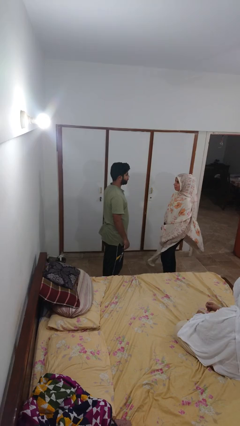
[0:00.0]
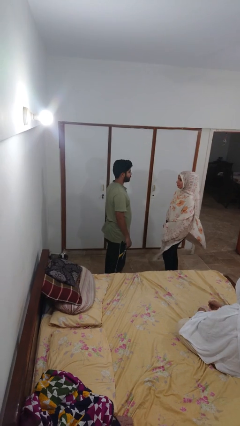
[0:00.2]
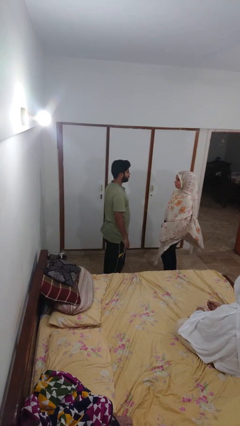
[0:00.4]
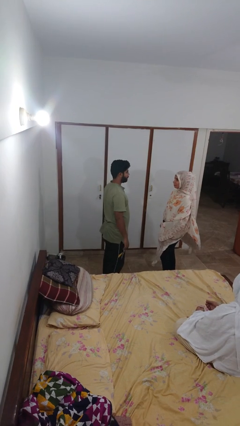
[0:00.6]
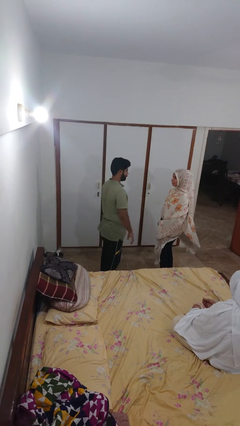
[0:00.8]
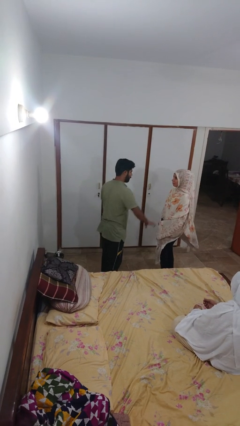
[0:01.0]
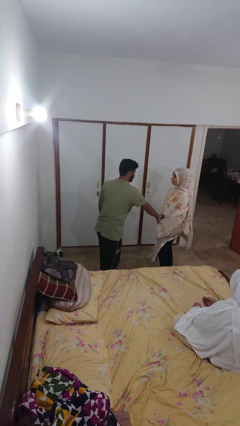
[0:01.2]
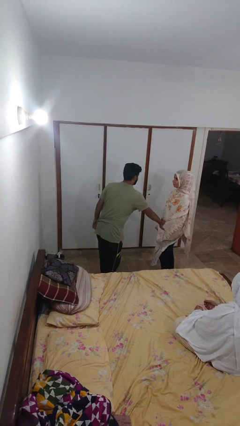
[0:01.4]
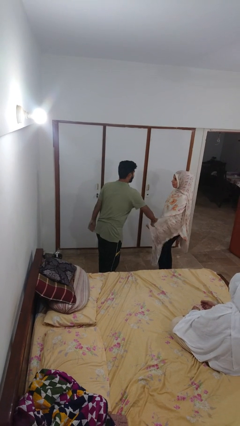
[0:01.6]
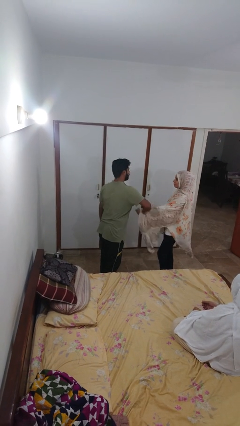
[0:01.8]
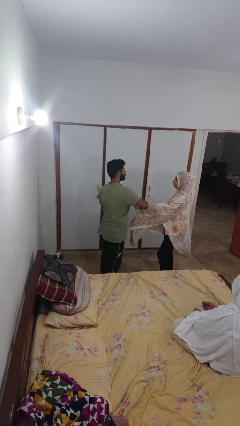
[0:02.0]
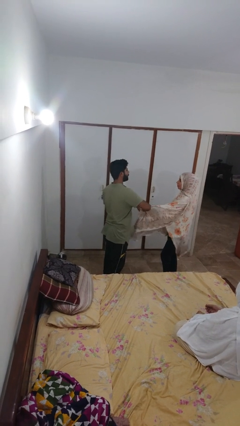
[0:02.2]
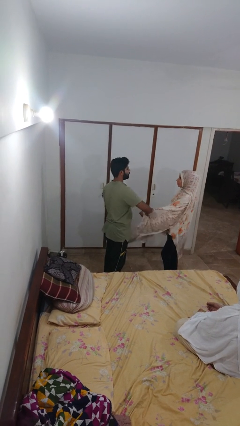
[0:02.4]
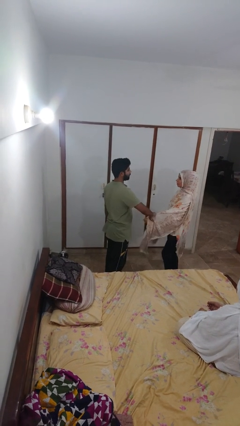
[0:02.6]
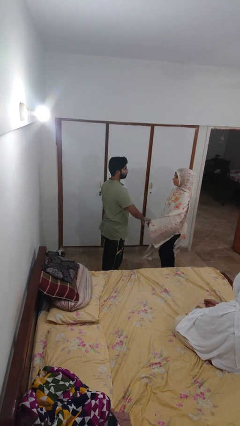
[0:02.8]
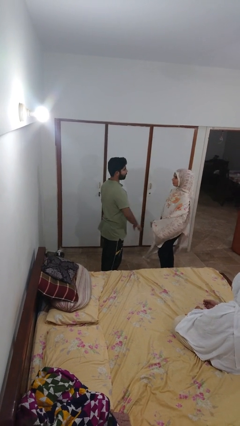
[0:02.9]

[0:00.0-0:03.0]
person grabs person by forearm

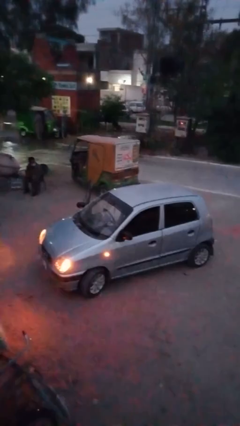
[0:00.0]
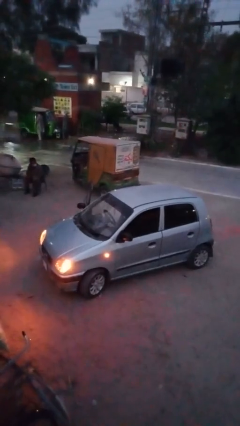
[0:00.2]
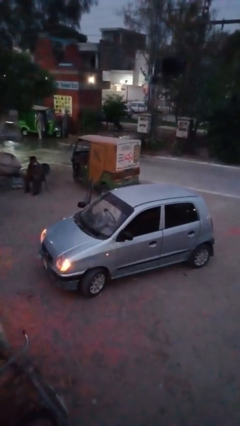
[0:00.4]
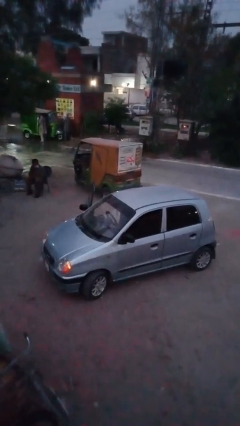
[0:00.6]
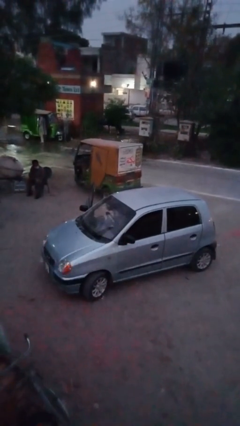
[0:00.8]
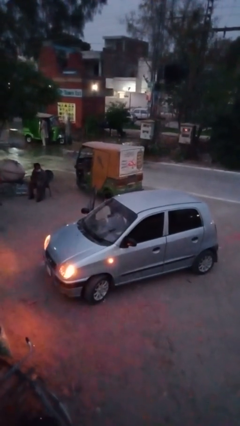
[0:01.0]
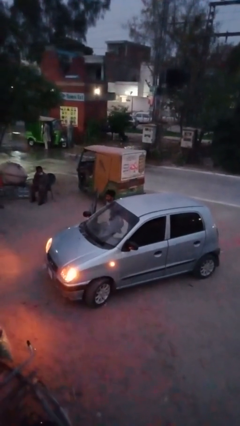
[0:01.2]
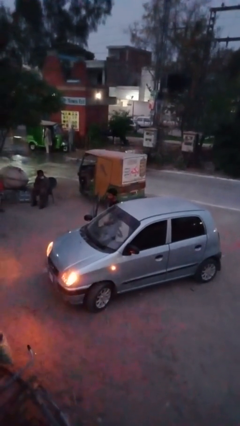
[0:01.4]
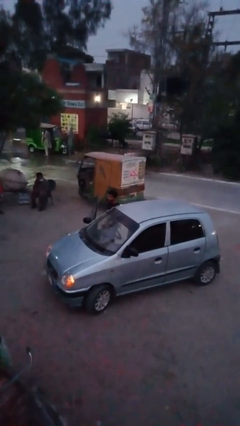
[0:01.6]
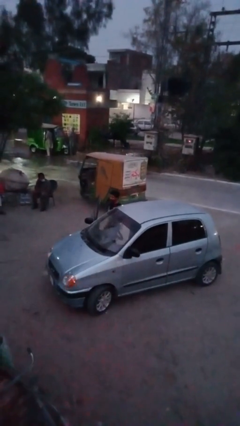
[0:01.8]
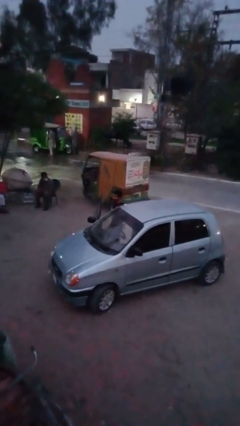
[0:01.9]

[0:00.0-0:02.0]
person exits car

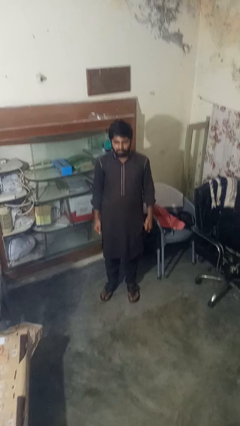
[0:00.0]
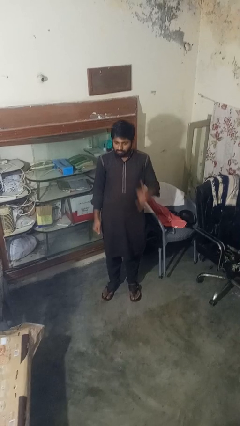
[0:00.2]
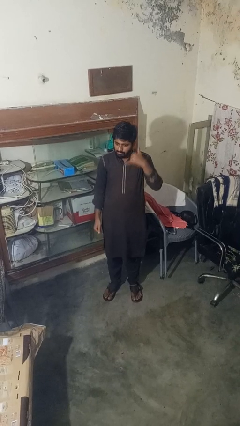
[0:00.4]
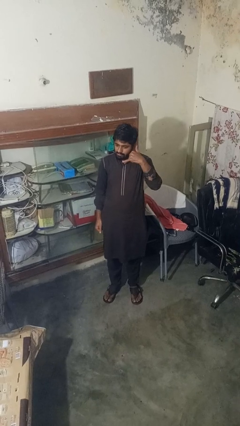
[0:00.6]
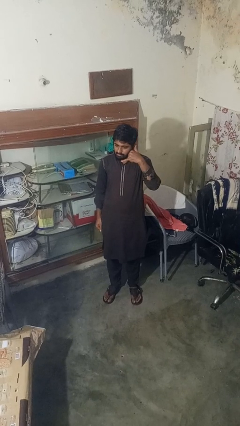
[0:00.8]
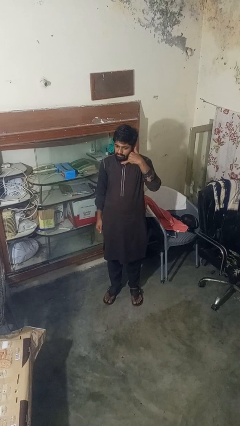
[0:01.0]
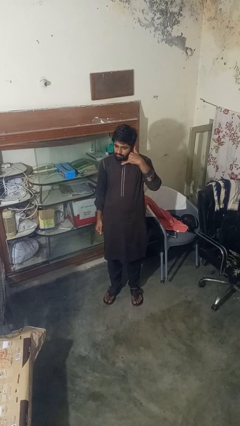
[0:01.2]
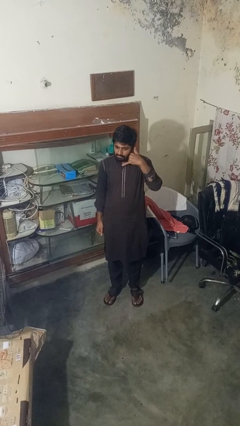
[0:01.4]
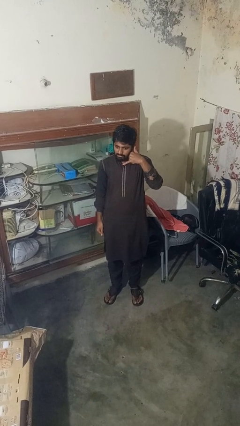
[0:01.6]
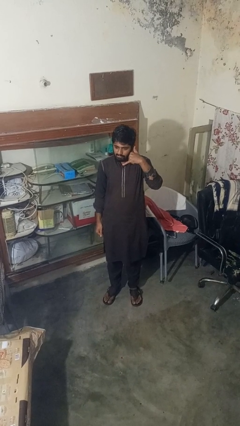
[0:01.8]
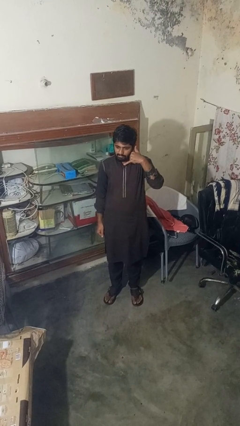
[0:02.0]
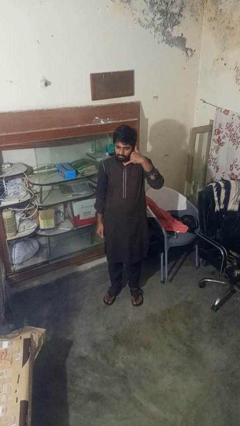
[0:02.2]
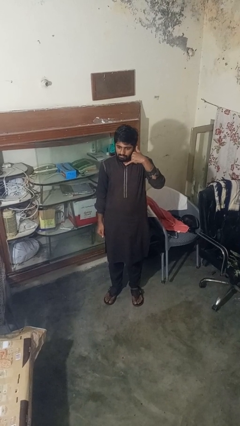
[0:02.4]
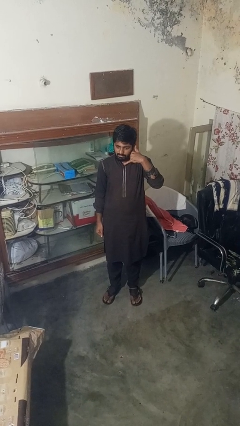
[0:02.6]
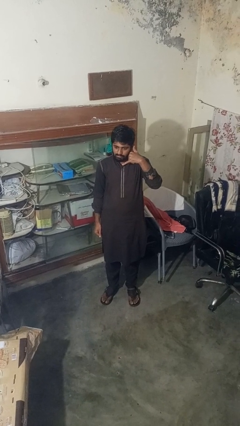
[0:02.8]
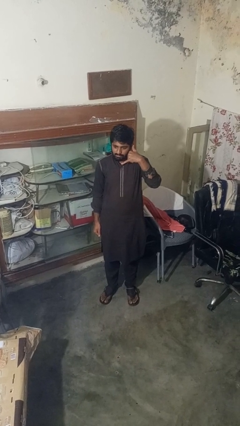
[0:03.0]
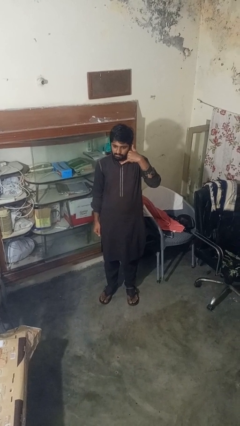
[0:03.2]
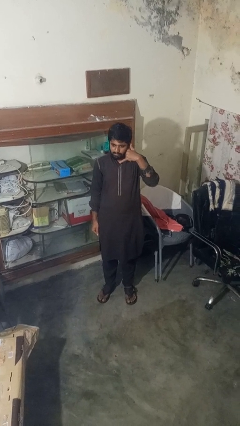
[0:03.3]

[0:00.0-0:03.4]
person gestures call me

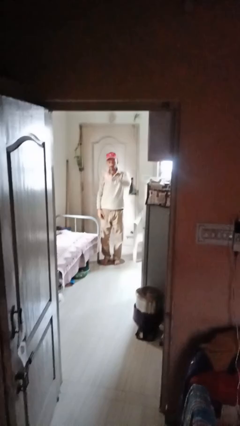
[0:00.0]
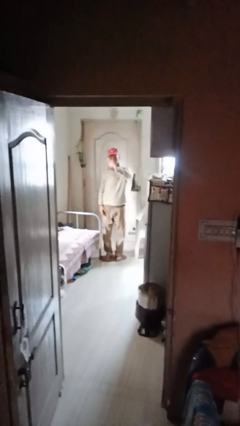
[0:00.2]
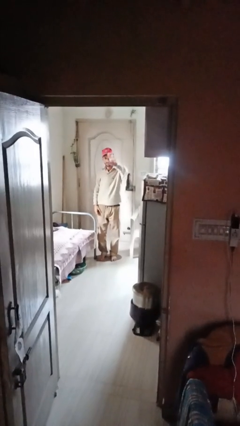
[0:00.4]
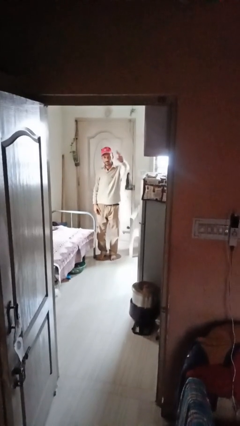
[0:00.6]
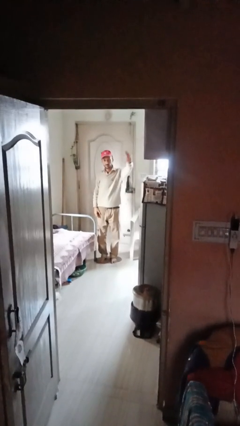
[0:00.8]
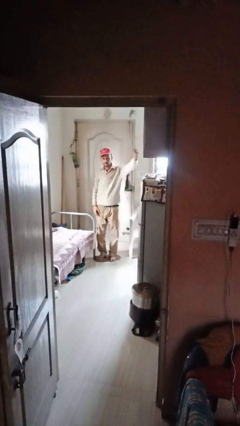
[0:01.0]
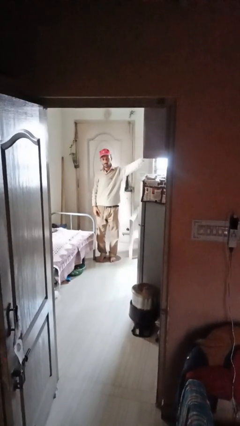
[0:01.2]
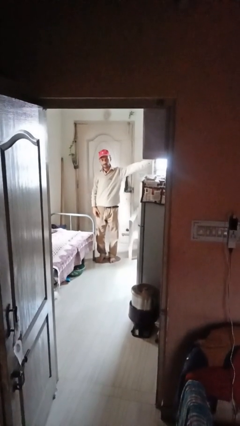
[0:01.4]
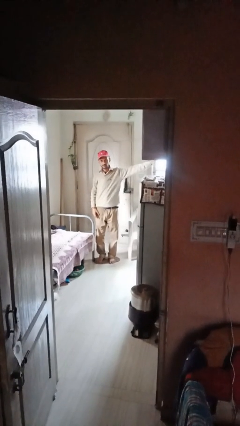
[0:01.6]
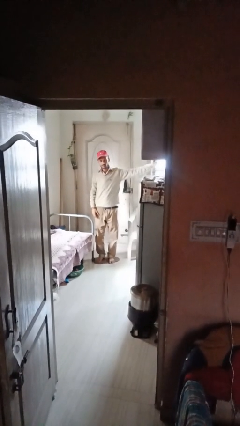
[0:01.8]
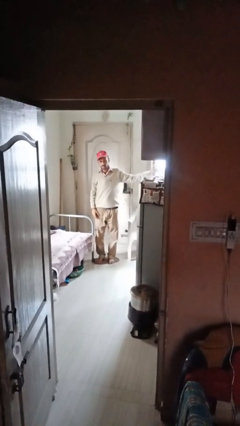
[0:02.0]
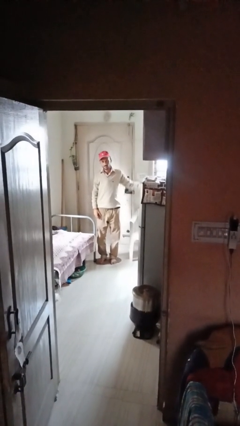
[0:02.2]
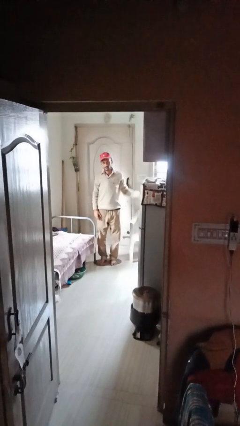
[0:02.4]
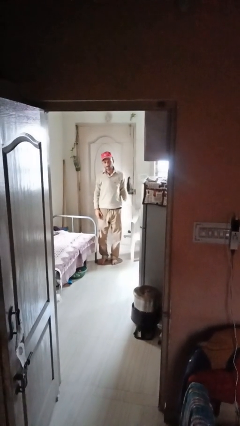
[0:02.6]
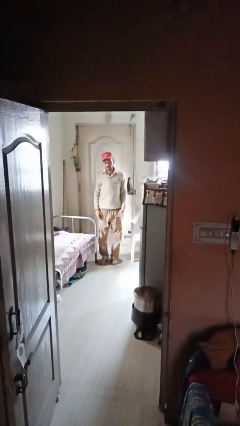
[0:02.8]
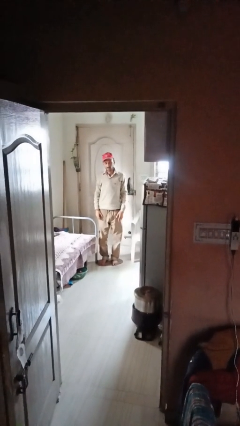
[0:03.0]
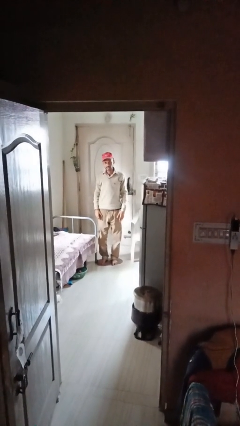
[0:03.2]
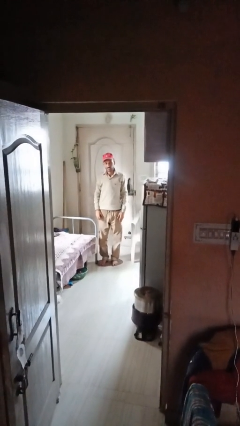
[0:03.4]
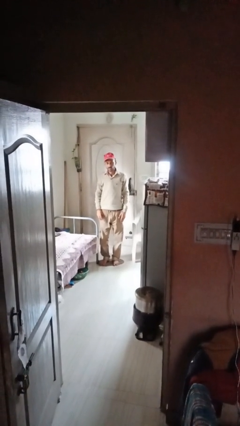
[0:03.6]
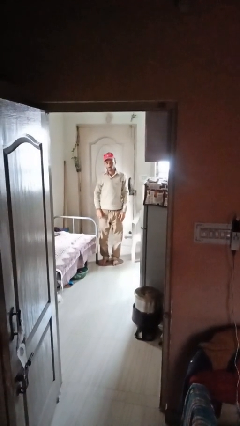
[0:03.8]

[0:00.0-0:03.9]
person gestures swipe left

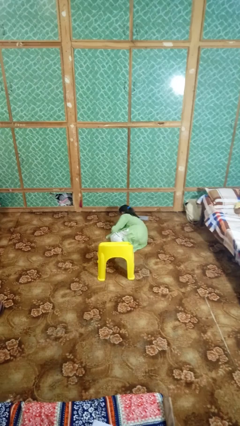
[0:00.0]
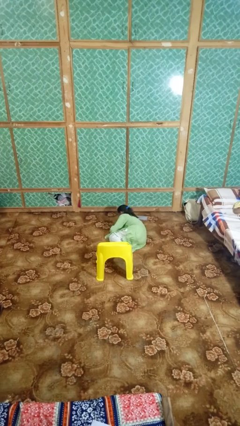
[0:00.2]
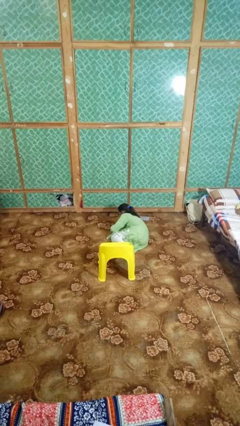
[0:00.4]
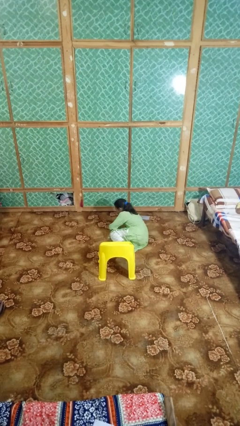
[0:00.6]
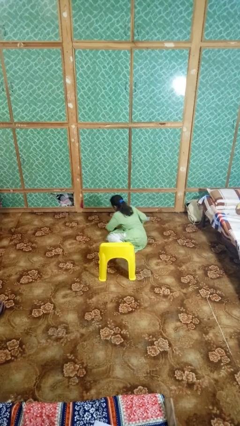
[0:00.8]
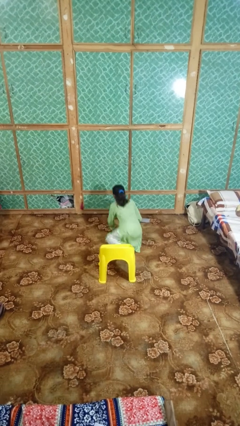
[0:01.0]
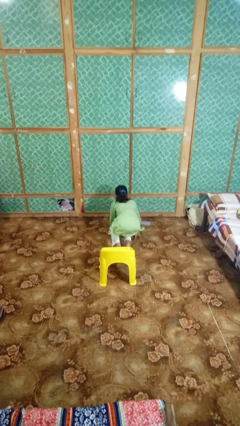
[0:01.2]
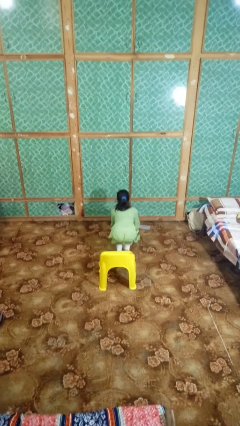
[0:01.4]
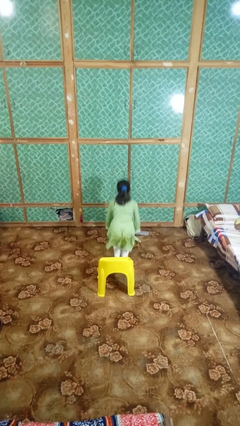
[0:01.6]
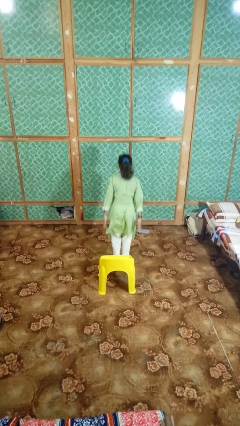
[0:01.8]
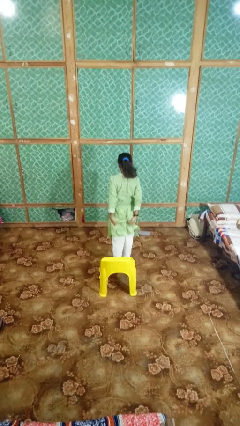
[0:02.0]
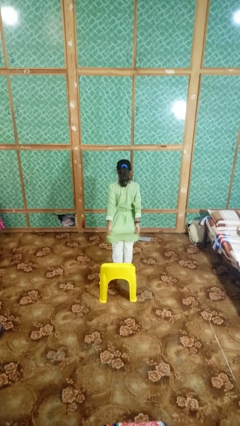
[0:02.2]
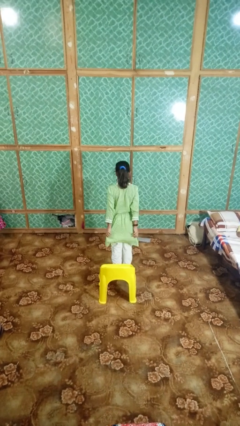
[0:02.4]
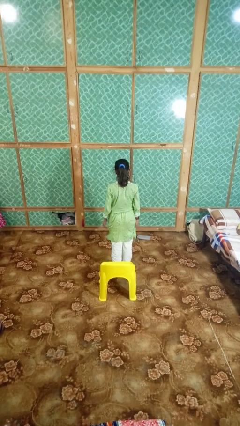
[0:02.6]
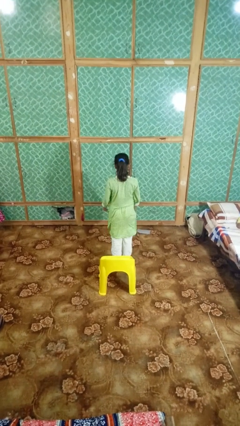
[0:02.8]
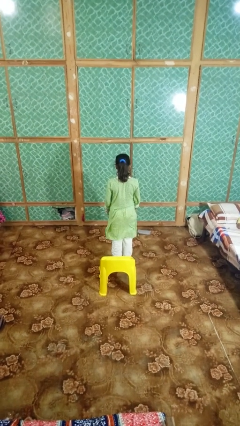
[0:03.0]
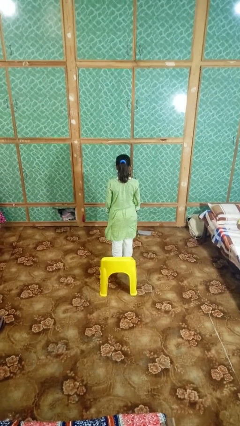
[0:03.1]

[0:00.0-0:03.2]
person stands up from floor

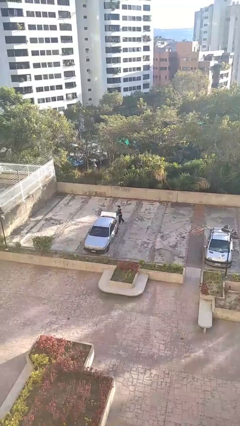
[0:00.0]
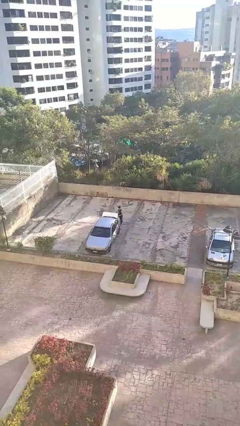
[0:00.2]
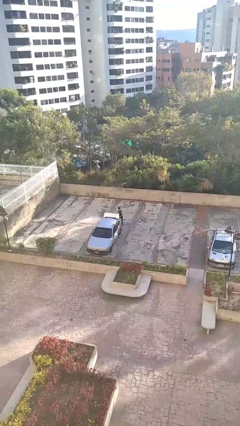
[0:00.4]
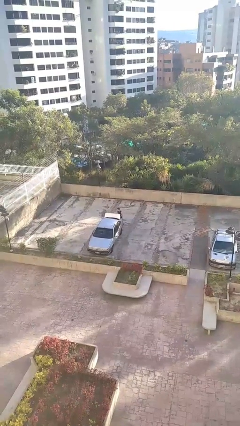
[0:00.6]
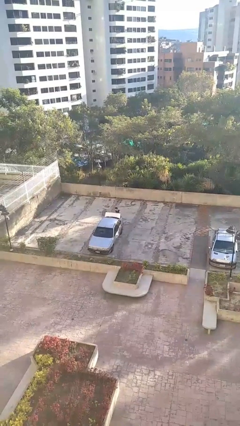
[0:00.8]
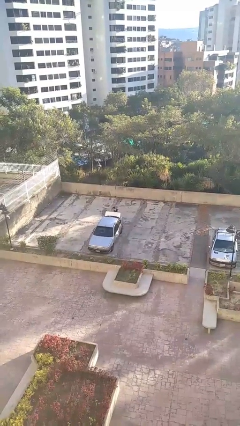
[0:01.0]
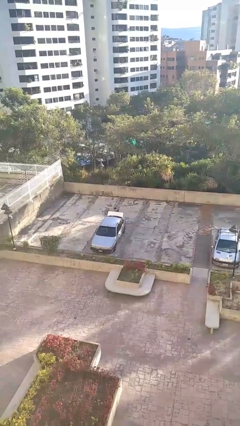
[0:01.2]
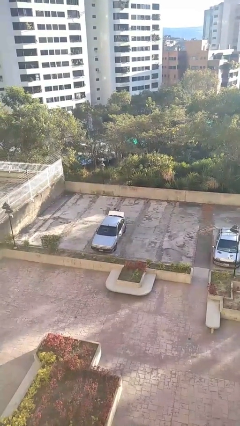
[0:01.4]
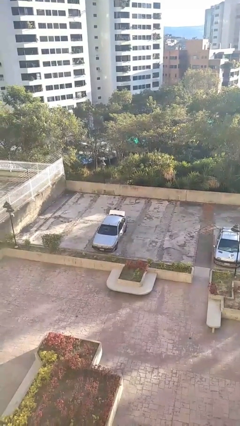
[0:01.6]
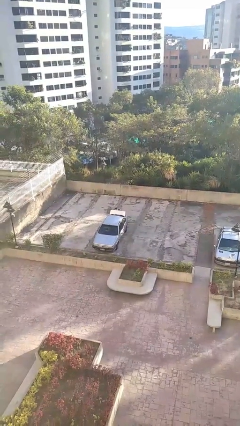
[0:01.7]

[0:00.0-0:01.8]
person loads car

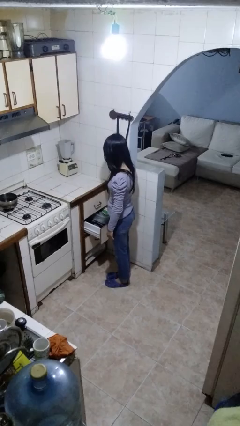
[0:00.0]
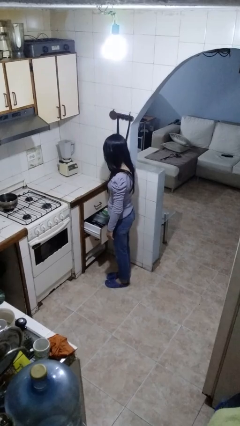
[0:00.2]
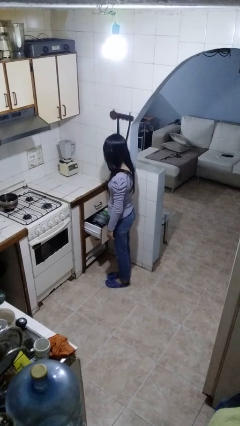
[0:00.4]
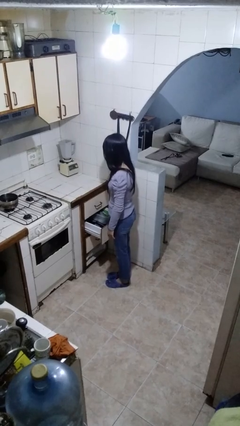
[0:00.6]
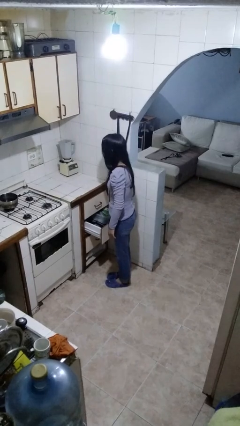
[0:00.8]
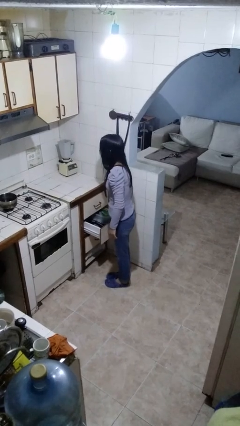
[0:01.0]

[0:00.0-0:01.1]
person closes cabinet
